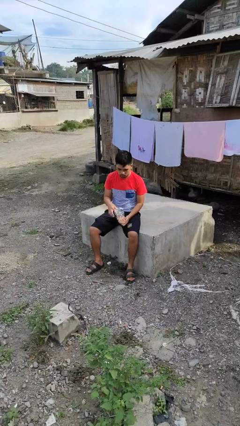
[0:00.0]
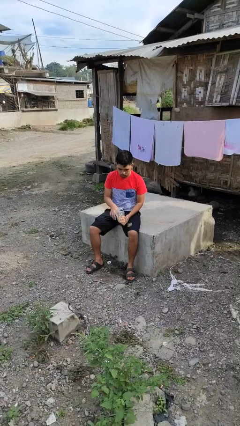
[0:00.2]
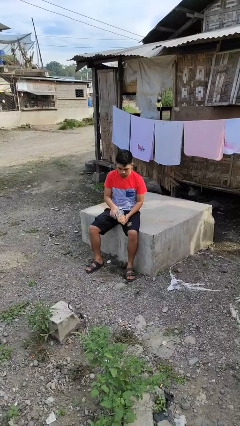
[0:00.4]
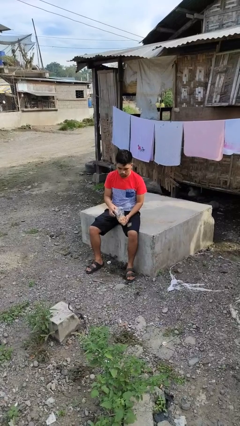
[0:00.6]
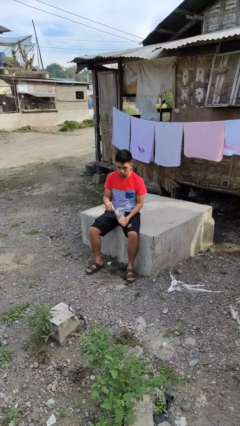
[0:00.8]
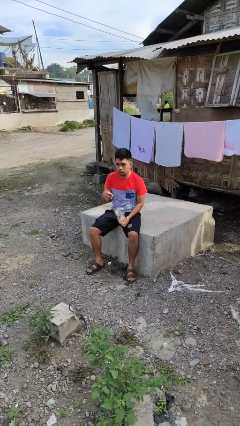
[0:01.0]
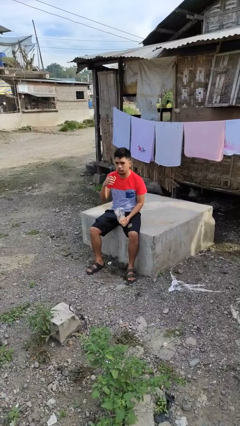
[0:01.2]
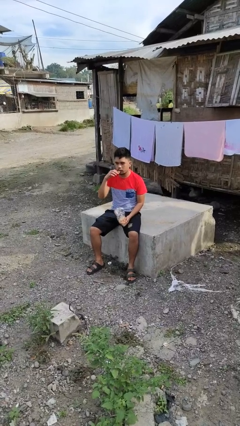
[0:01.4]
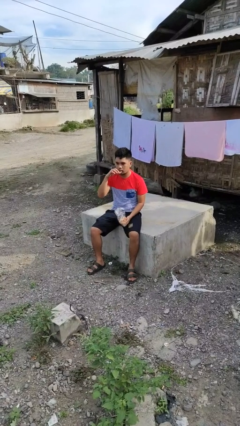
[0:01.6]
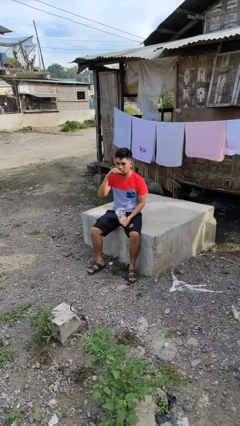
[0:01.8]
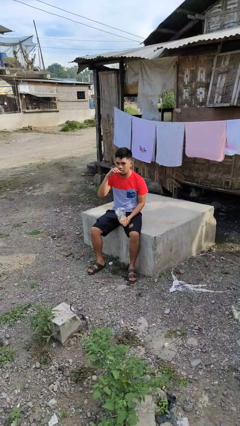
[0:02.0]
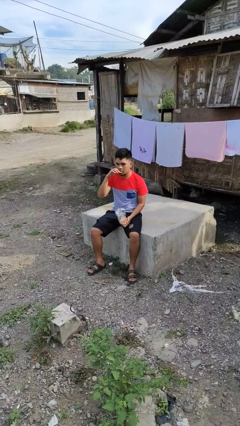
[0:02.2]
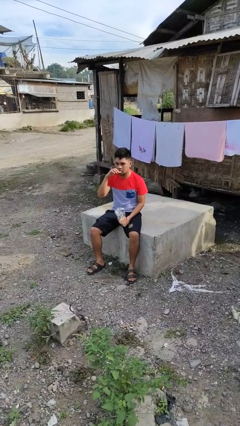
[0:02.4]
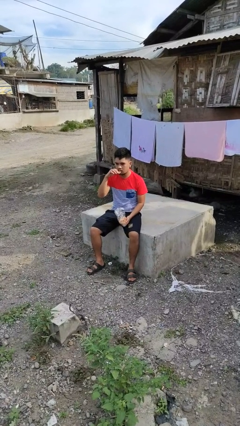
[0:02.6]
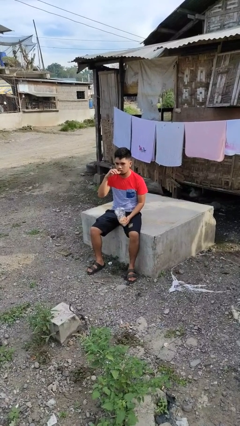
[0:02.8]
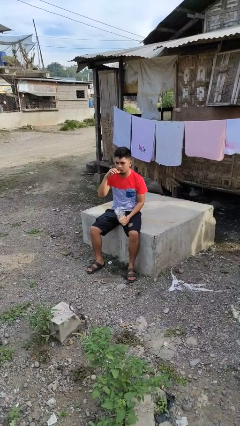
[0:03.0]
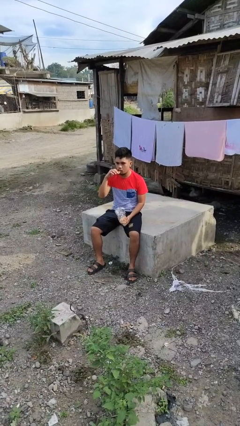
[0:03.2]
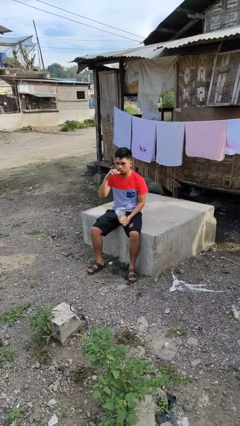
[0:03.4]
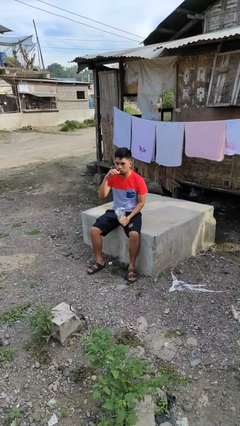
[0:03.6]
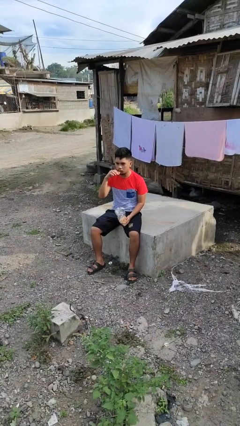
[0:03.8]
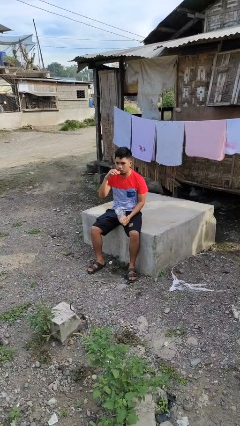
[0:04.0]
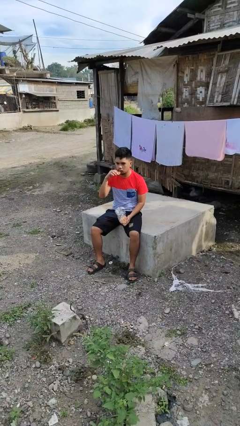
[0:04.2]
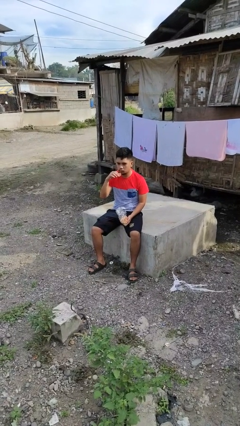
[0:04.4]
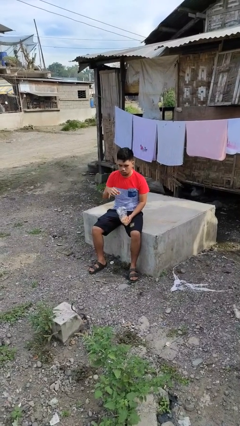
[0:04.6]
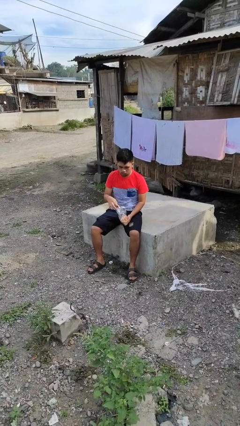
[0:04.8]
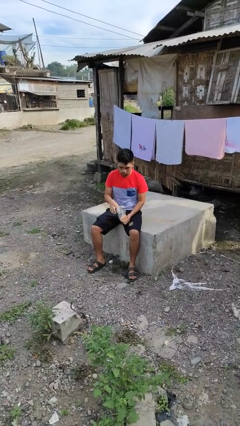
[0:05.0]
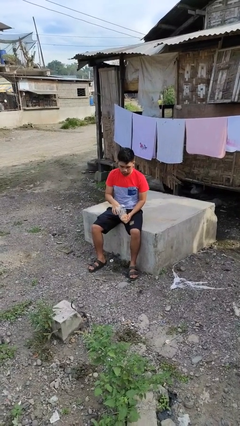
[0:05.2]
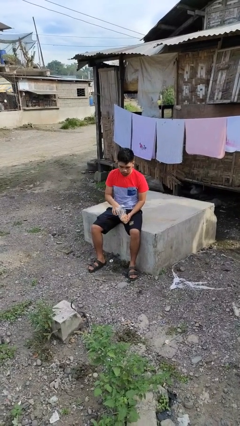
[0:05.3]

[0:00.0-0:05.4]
person eats snack from bag

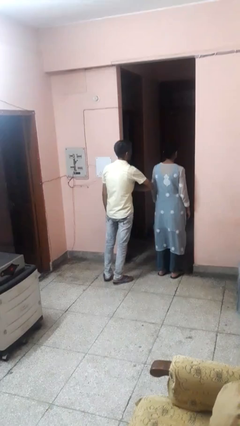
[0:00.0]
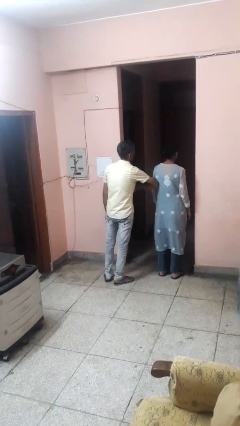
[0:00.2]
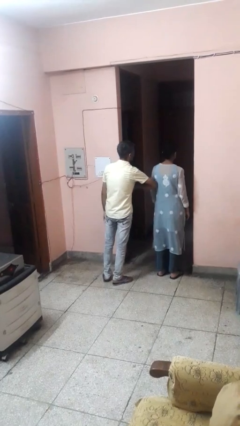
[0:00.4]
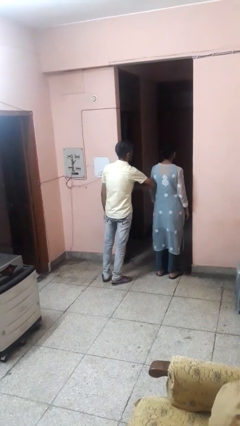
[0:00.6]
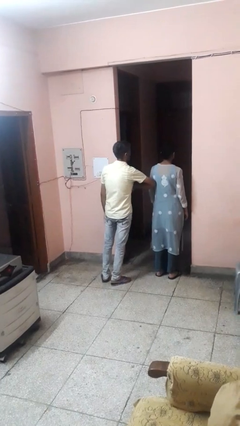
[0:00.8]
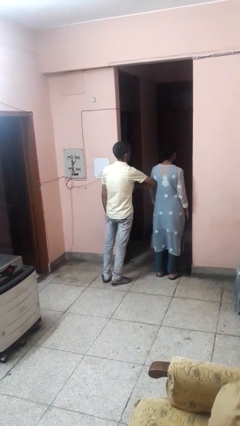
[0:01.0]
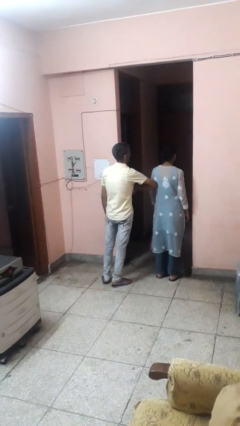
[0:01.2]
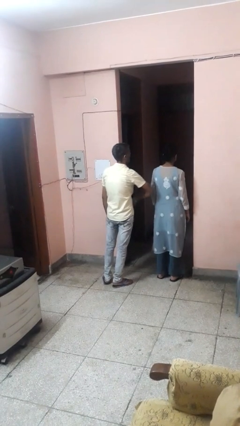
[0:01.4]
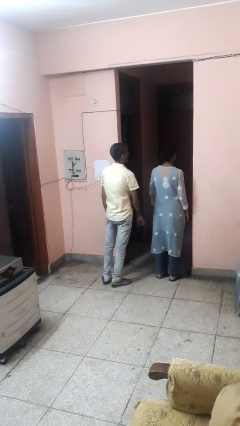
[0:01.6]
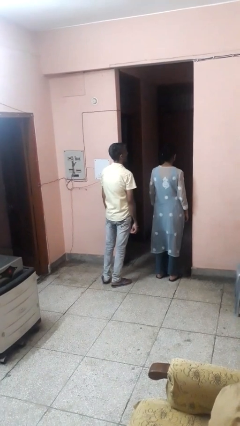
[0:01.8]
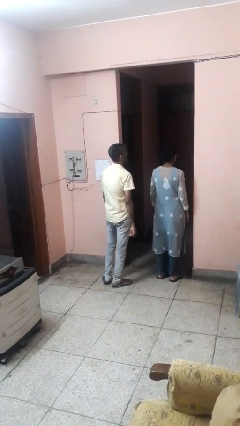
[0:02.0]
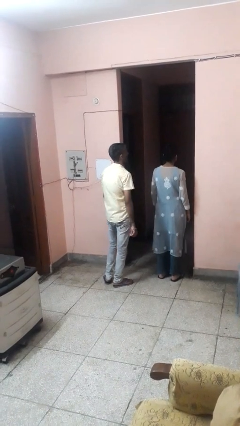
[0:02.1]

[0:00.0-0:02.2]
person nudges person with elbow

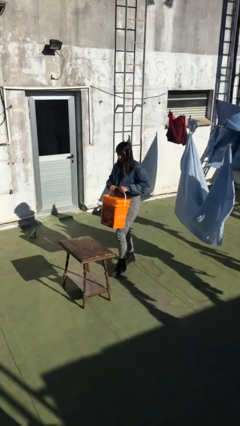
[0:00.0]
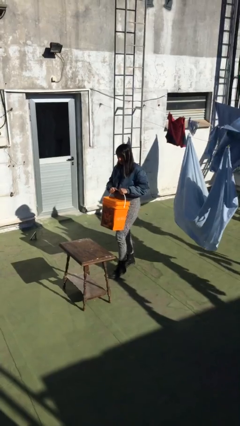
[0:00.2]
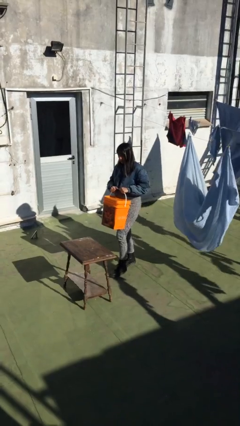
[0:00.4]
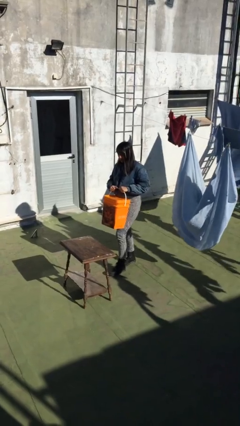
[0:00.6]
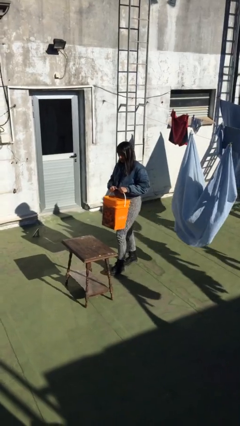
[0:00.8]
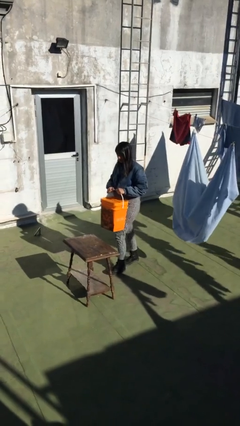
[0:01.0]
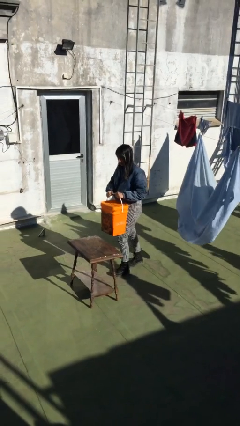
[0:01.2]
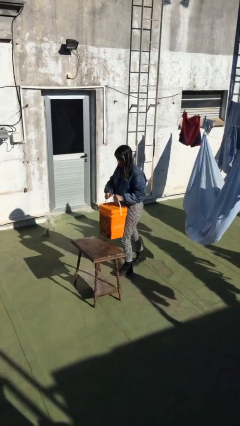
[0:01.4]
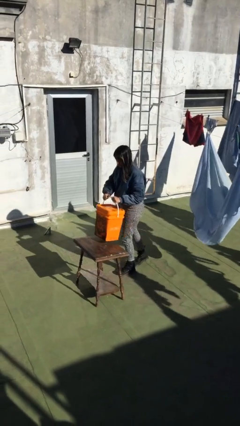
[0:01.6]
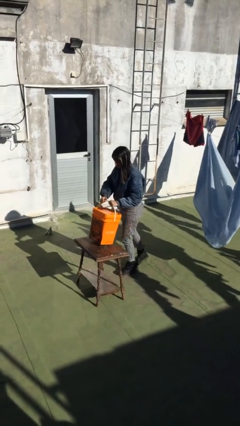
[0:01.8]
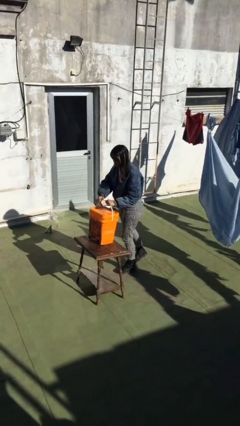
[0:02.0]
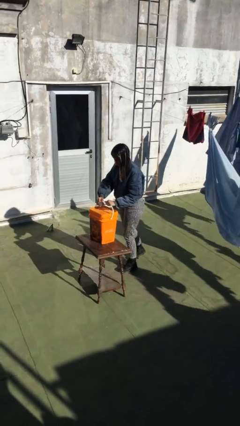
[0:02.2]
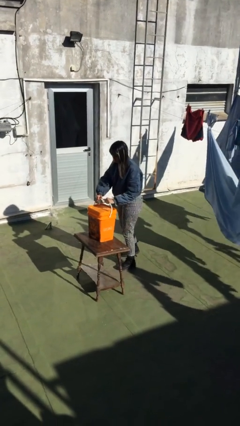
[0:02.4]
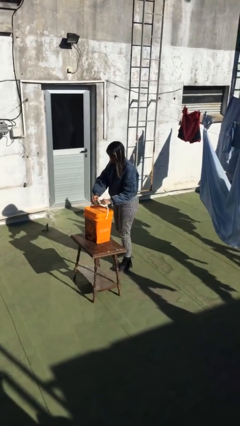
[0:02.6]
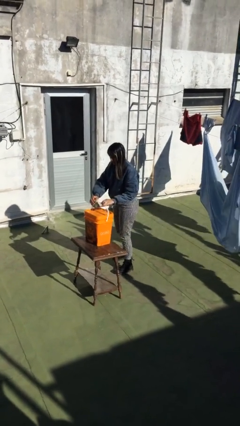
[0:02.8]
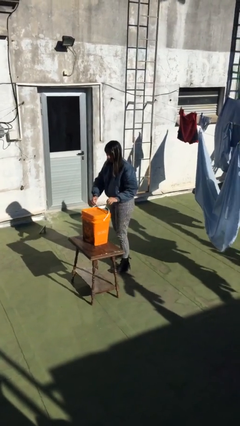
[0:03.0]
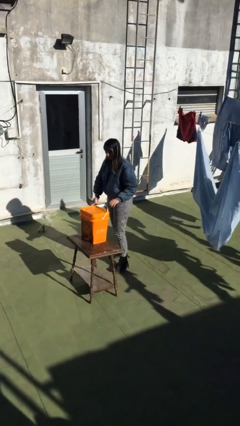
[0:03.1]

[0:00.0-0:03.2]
person puts down object on table

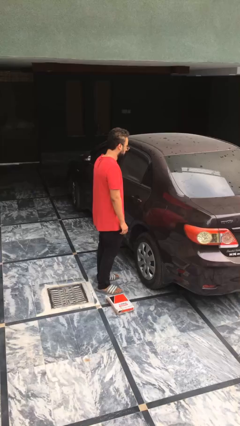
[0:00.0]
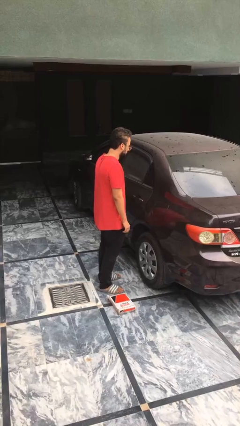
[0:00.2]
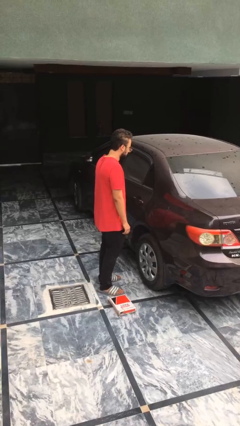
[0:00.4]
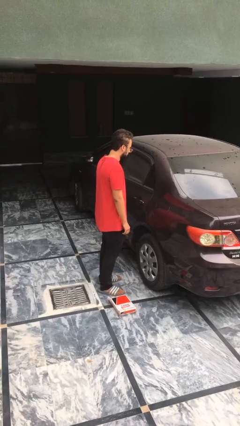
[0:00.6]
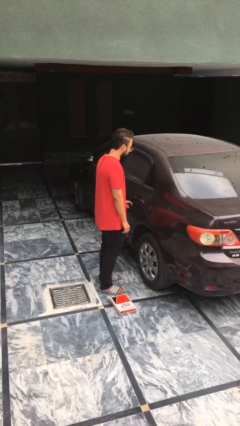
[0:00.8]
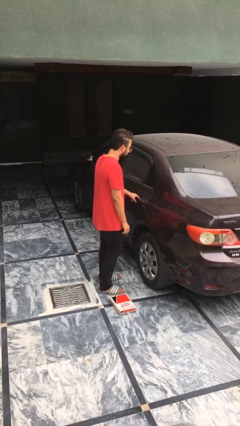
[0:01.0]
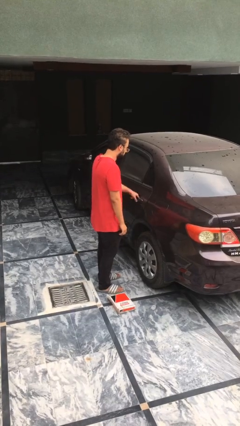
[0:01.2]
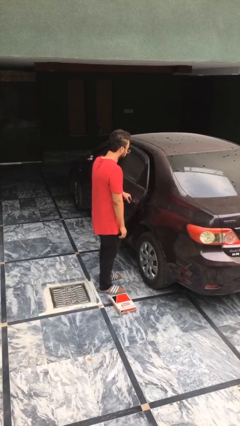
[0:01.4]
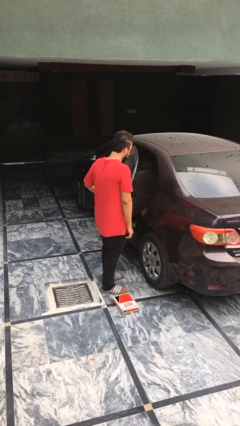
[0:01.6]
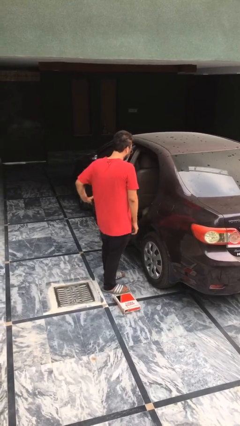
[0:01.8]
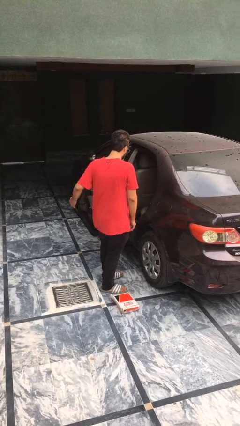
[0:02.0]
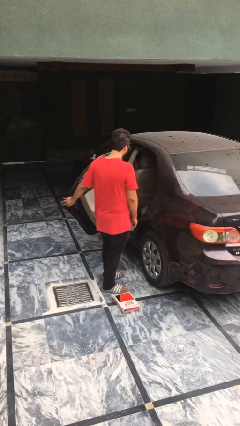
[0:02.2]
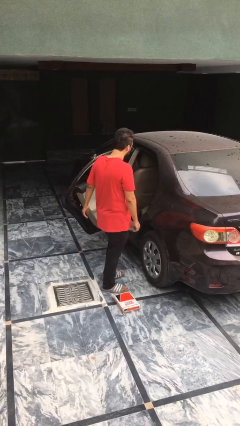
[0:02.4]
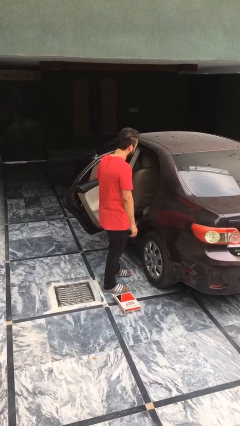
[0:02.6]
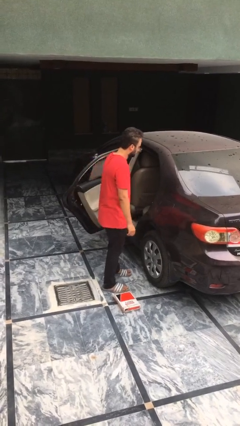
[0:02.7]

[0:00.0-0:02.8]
person opens car door

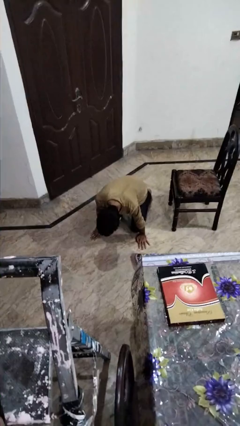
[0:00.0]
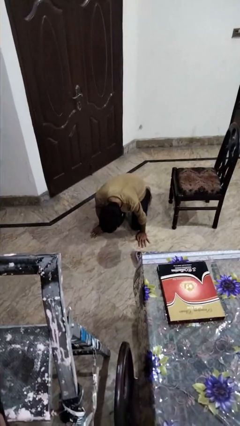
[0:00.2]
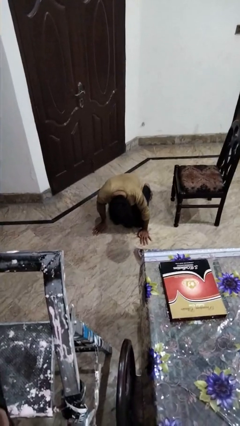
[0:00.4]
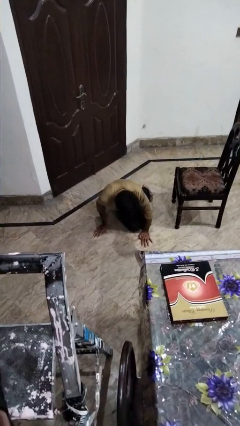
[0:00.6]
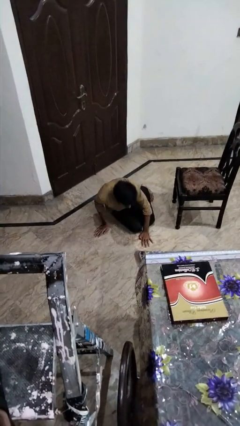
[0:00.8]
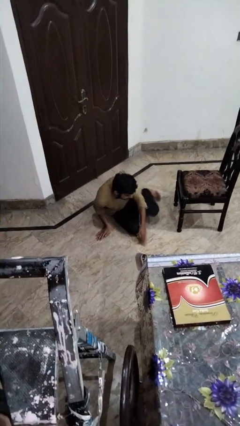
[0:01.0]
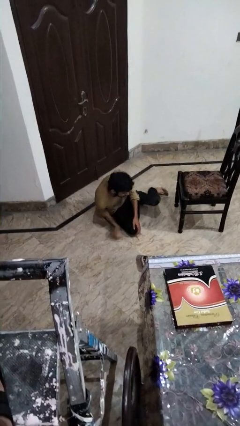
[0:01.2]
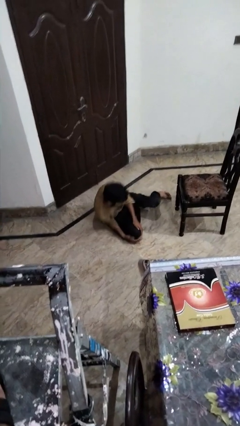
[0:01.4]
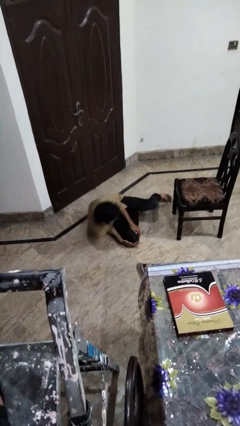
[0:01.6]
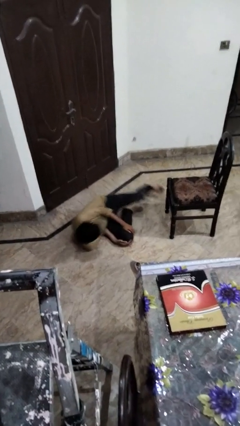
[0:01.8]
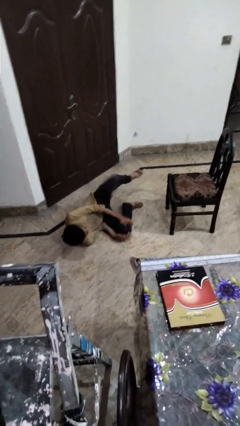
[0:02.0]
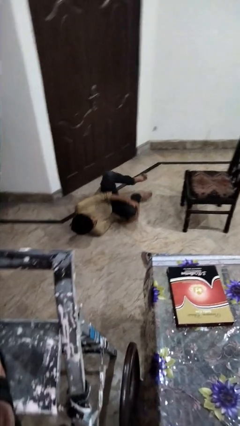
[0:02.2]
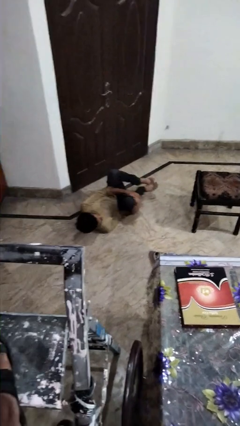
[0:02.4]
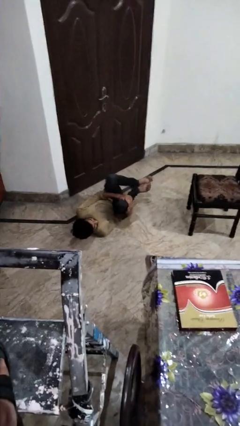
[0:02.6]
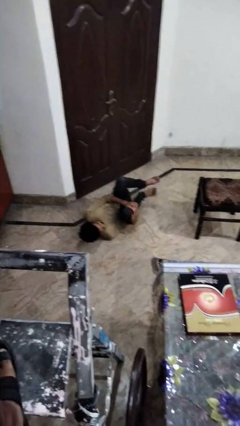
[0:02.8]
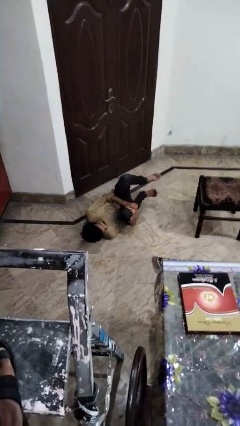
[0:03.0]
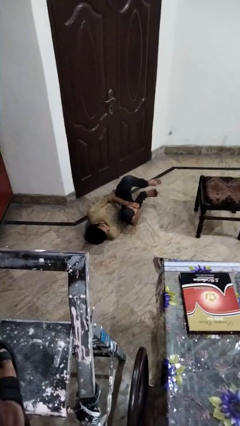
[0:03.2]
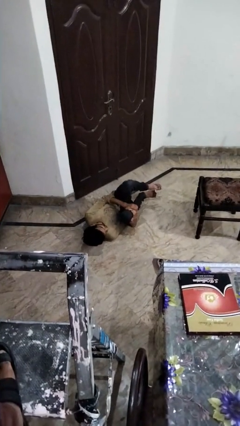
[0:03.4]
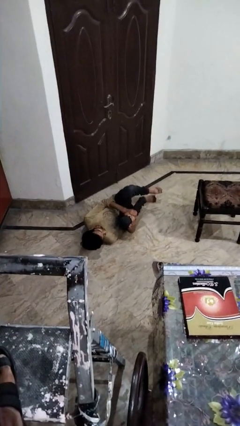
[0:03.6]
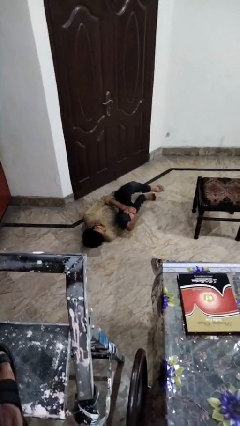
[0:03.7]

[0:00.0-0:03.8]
person lies down on floor
